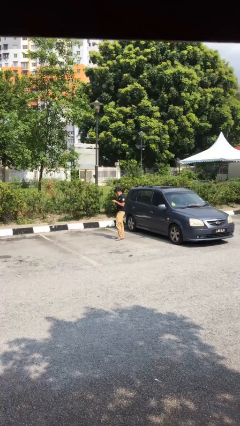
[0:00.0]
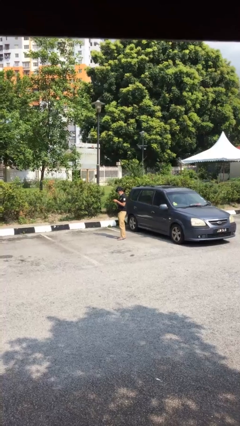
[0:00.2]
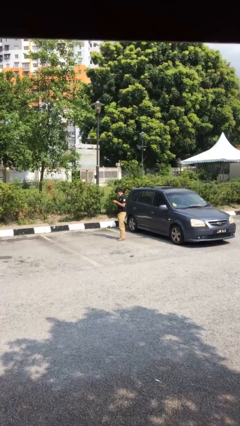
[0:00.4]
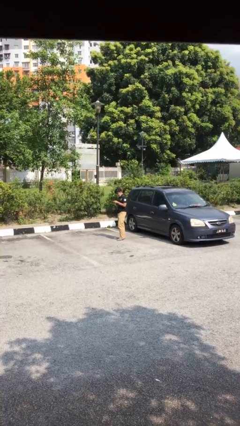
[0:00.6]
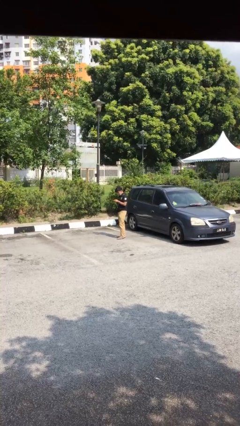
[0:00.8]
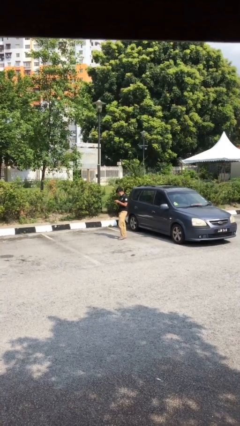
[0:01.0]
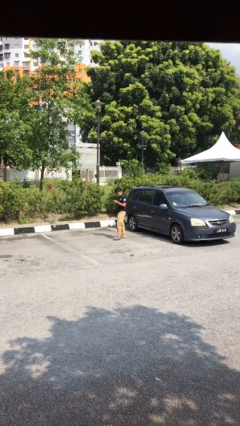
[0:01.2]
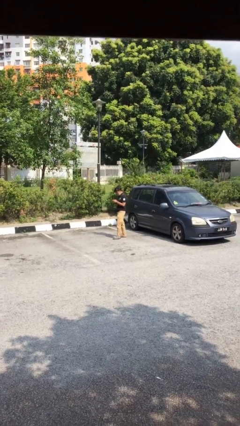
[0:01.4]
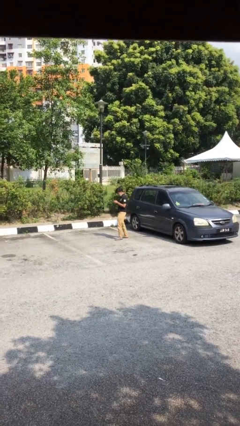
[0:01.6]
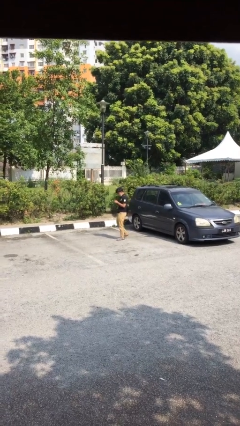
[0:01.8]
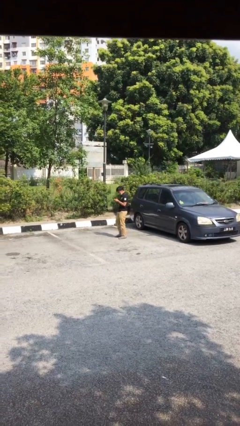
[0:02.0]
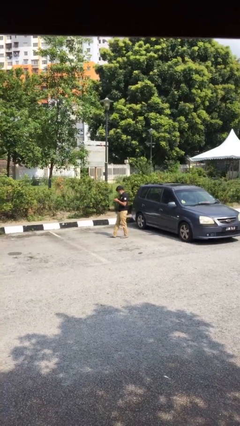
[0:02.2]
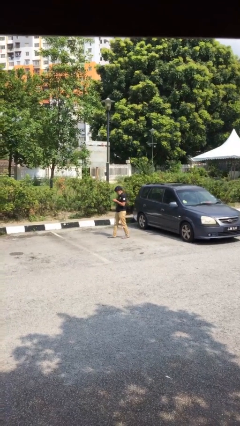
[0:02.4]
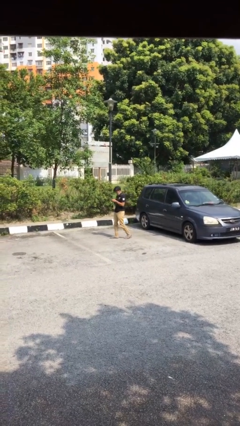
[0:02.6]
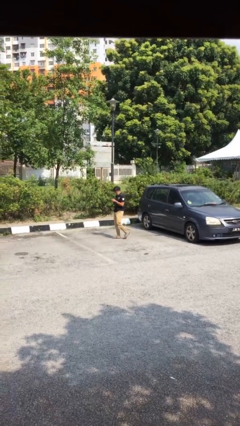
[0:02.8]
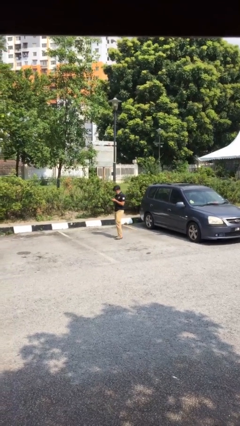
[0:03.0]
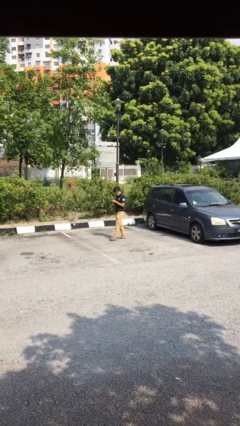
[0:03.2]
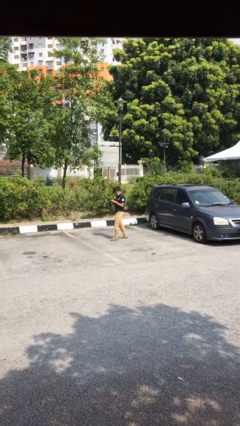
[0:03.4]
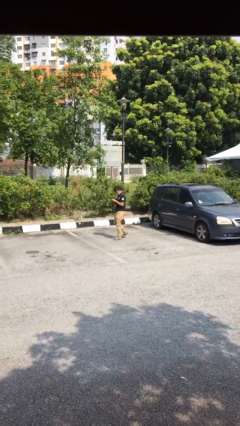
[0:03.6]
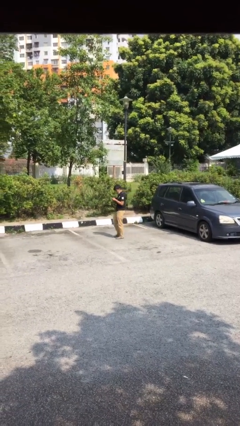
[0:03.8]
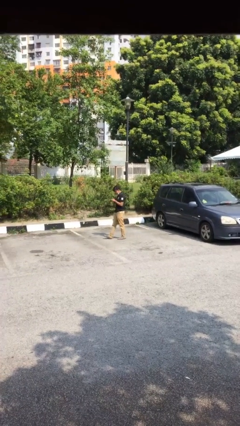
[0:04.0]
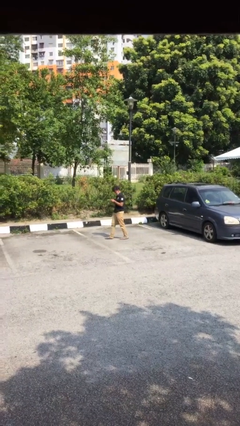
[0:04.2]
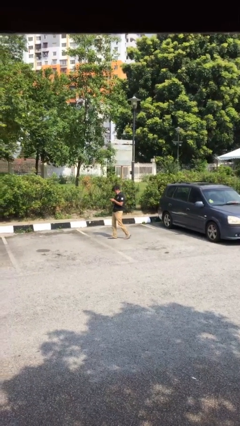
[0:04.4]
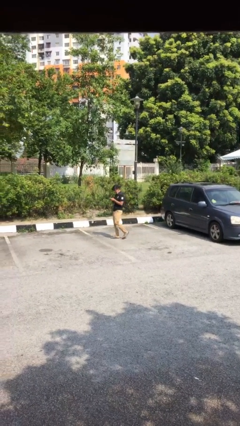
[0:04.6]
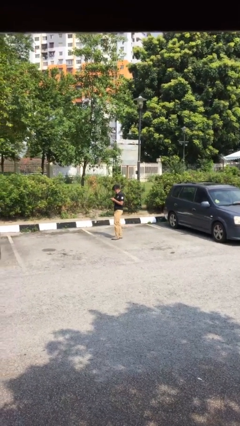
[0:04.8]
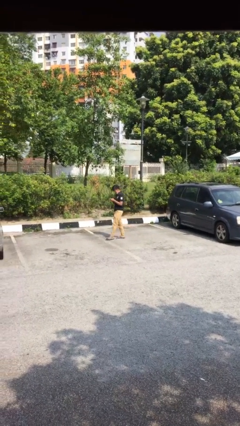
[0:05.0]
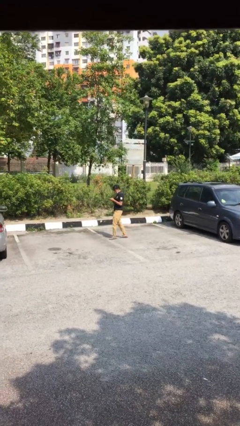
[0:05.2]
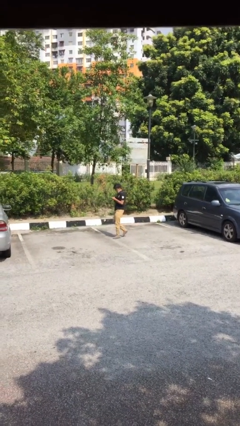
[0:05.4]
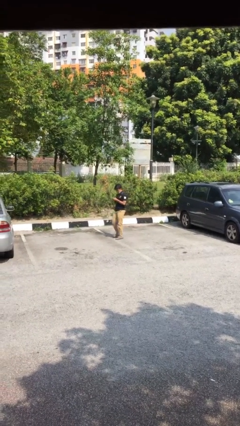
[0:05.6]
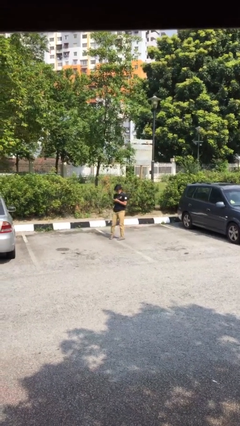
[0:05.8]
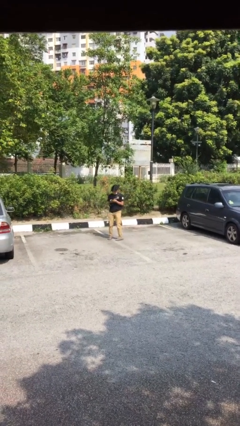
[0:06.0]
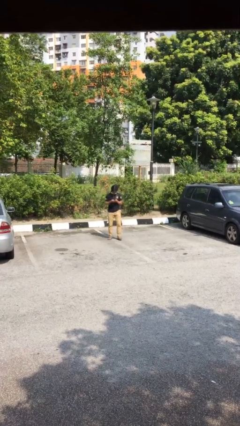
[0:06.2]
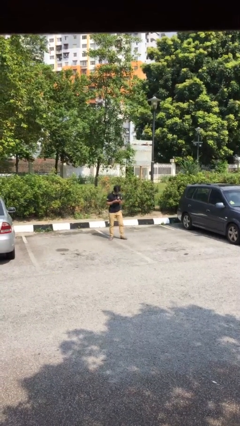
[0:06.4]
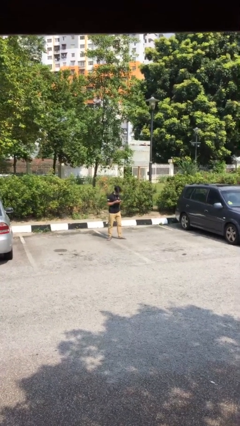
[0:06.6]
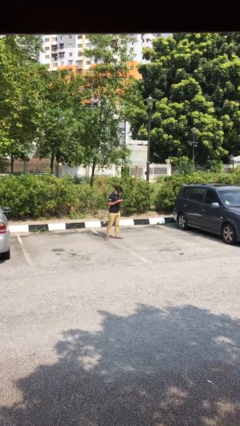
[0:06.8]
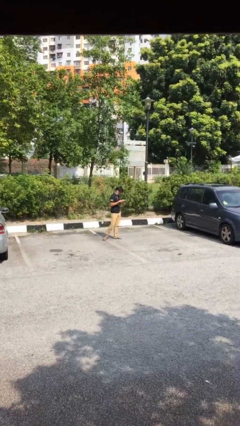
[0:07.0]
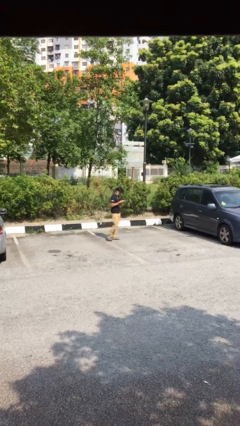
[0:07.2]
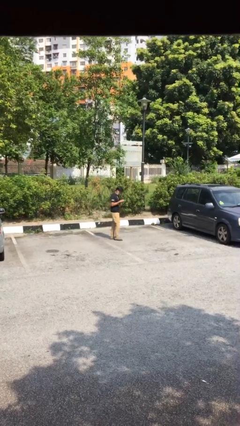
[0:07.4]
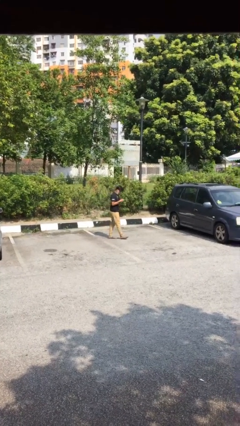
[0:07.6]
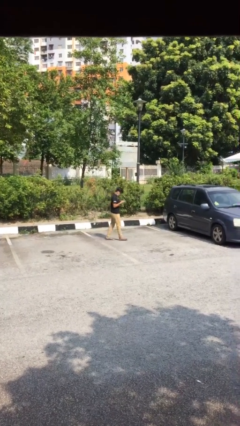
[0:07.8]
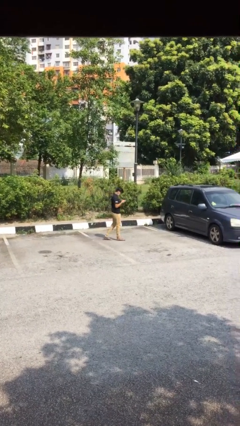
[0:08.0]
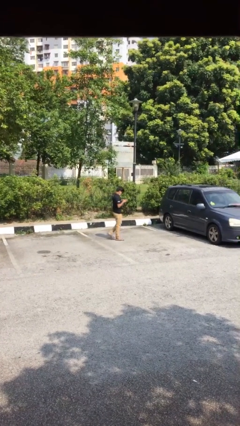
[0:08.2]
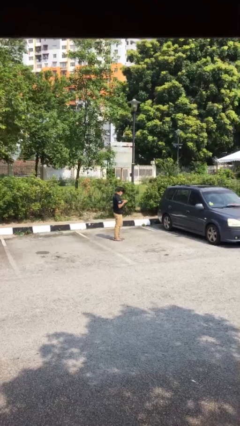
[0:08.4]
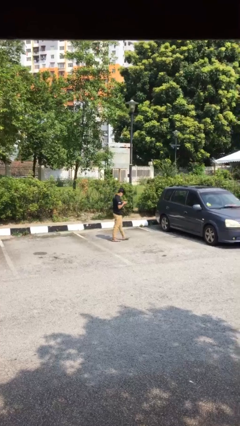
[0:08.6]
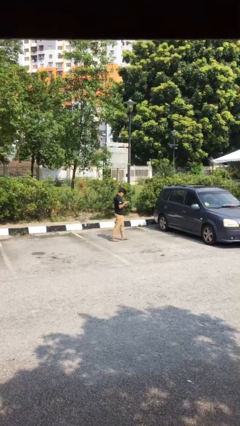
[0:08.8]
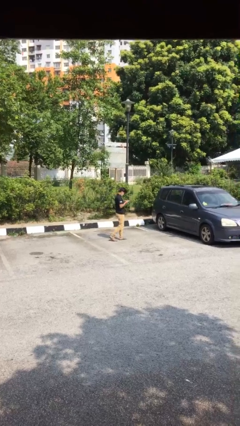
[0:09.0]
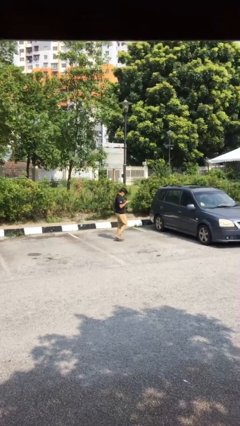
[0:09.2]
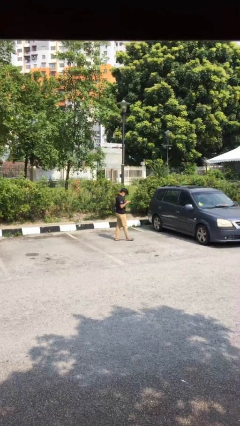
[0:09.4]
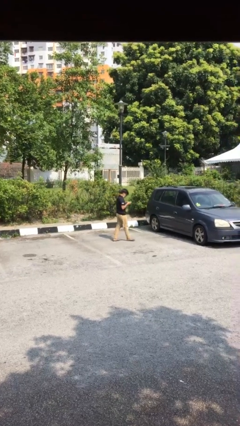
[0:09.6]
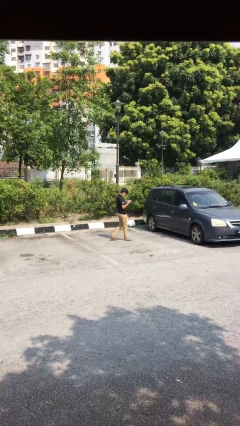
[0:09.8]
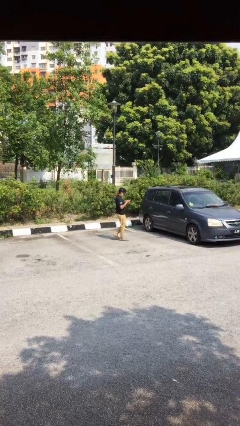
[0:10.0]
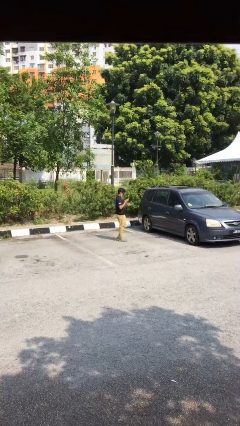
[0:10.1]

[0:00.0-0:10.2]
person texts on phone

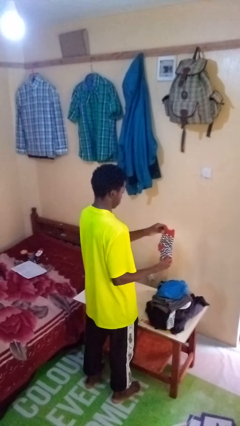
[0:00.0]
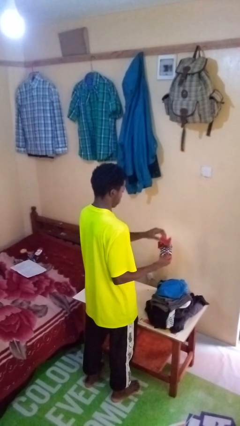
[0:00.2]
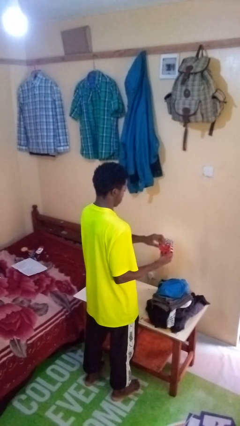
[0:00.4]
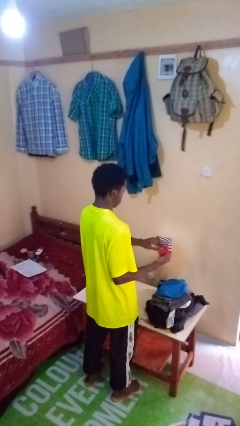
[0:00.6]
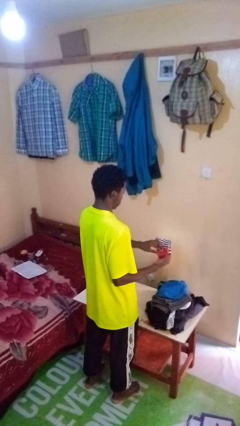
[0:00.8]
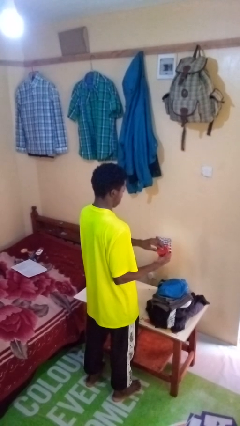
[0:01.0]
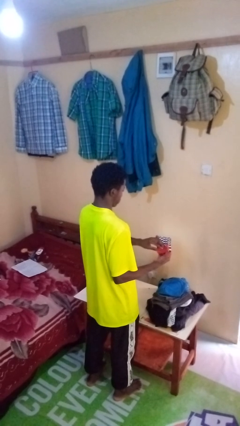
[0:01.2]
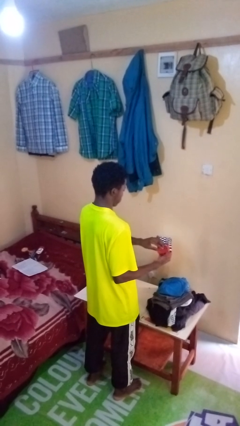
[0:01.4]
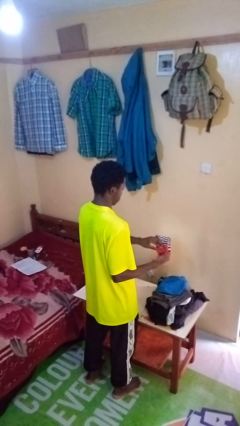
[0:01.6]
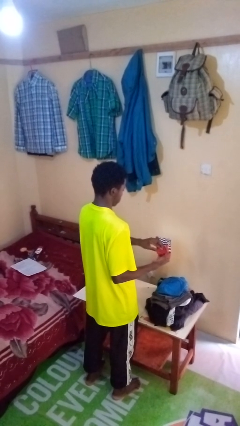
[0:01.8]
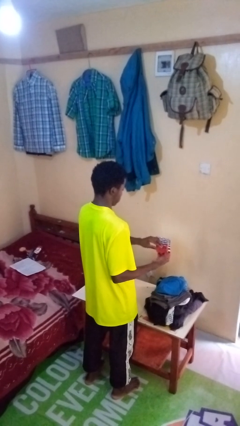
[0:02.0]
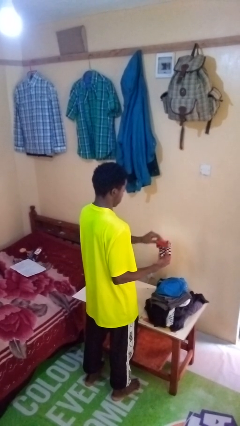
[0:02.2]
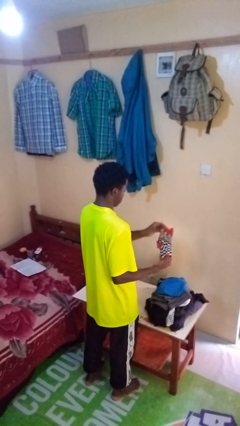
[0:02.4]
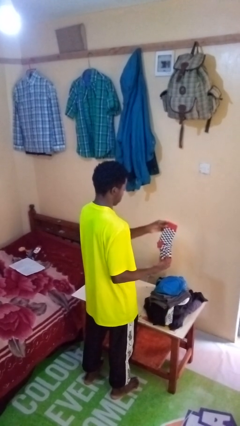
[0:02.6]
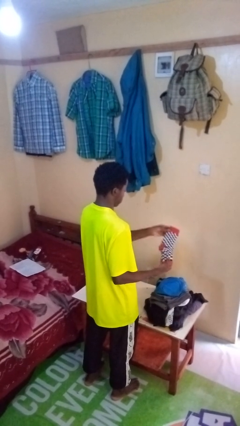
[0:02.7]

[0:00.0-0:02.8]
person folds socks

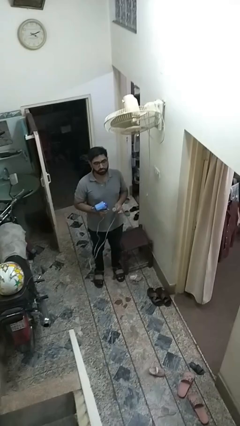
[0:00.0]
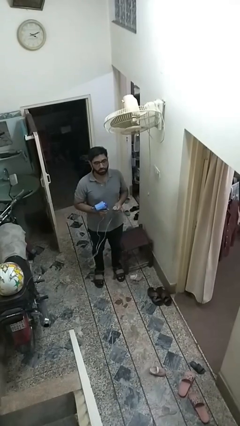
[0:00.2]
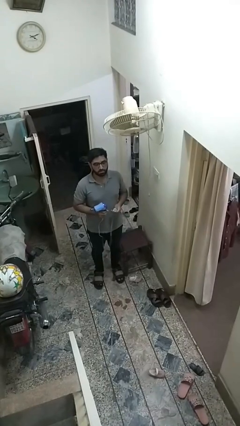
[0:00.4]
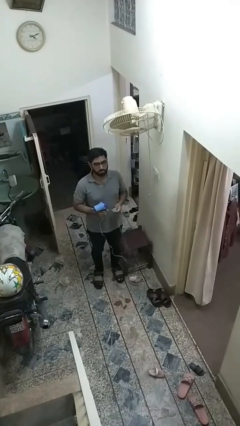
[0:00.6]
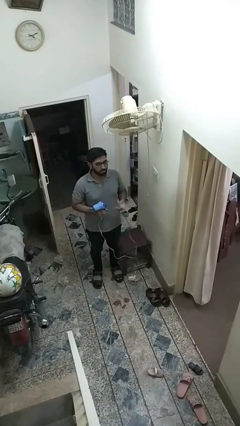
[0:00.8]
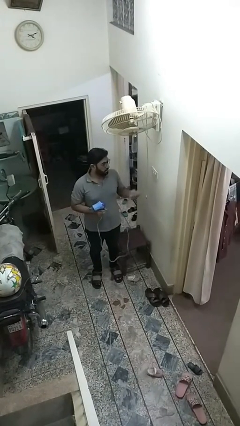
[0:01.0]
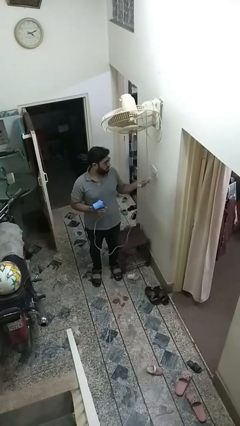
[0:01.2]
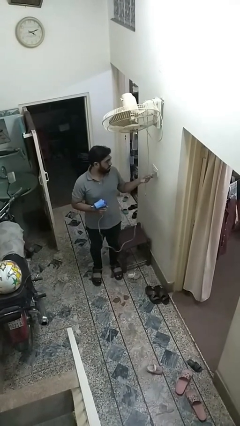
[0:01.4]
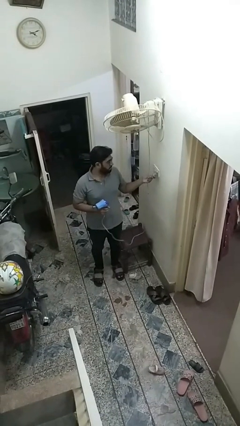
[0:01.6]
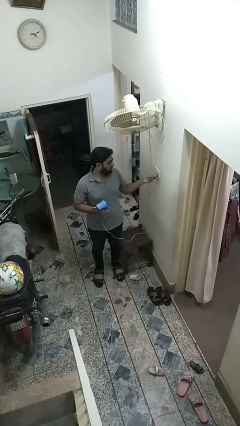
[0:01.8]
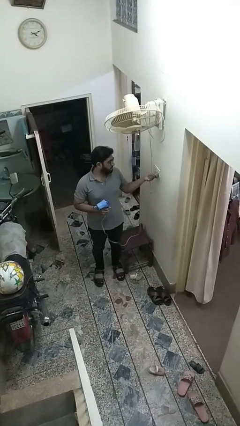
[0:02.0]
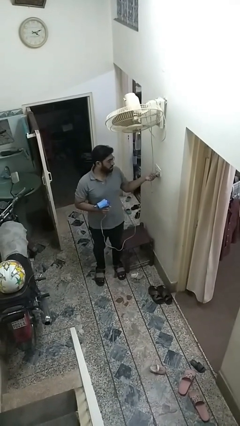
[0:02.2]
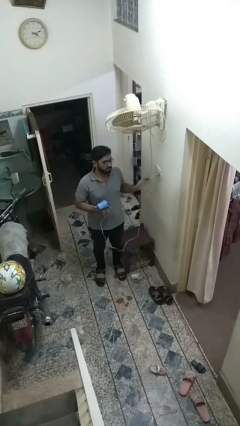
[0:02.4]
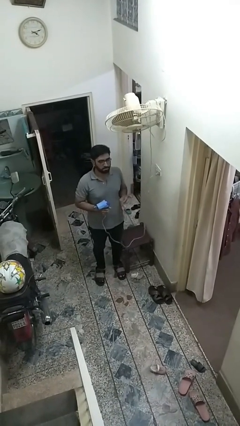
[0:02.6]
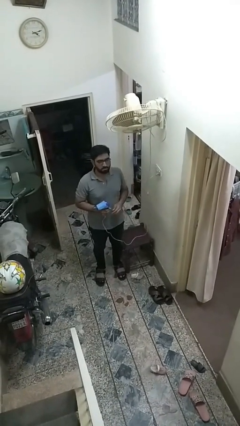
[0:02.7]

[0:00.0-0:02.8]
person plugs into electrical socket

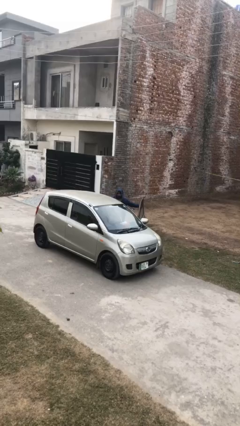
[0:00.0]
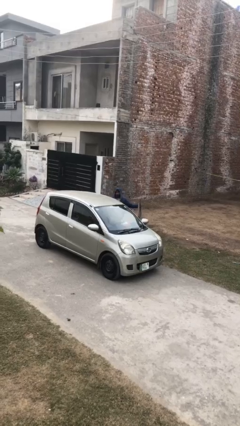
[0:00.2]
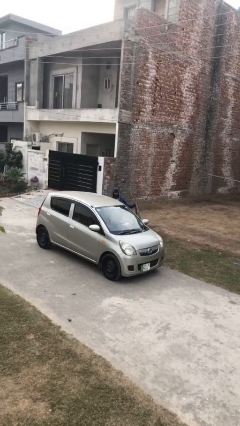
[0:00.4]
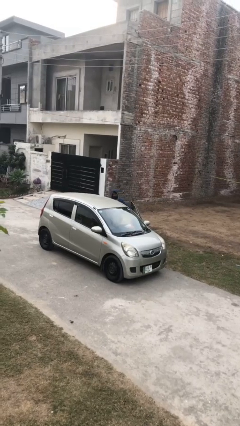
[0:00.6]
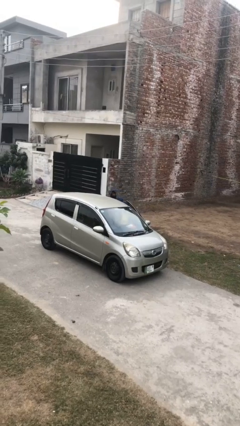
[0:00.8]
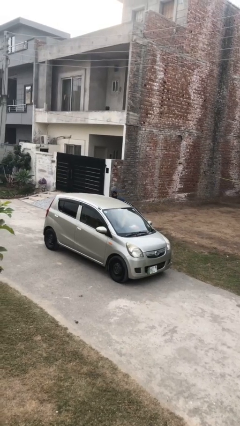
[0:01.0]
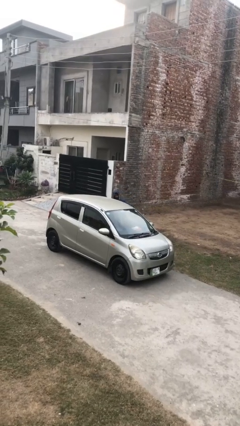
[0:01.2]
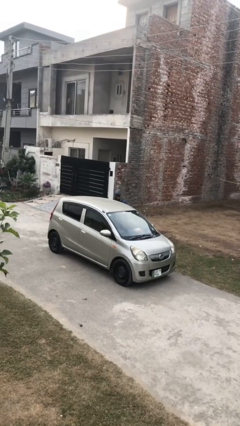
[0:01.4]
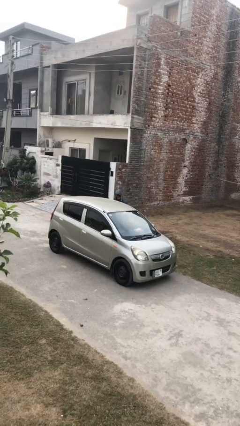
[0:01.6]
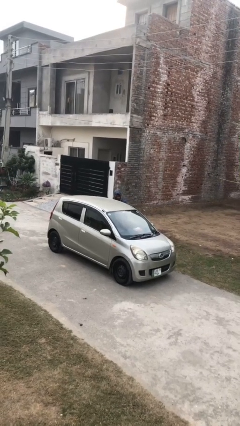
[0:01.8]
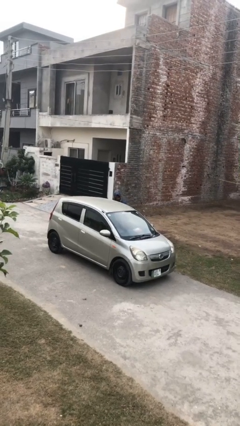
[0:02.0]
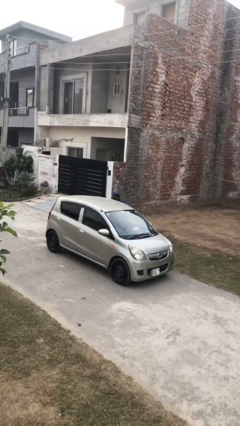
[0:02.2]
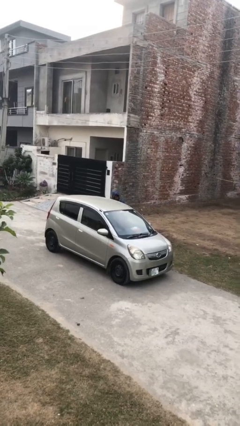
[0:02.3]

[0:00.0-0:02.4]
person closes car door
